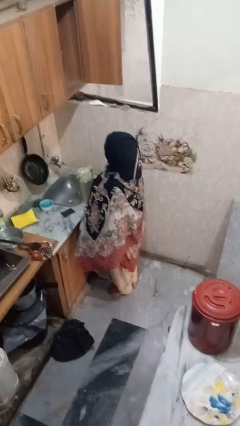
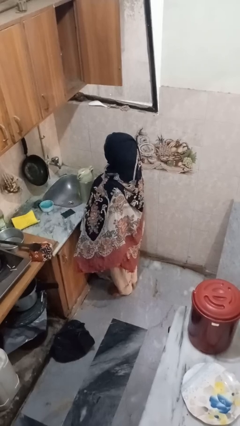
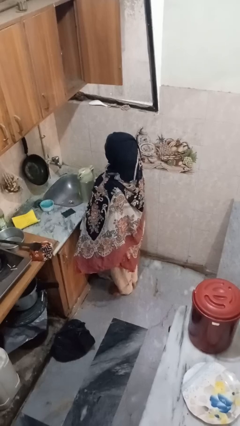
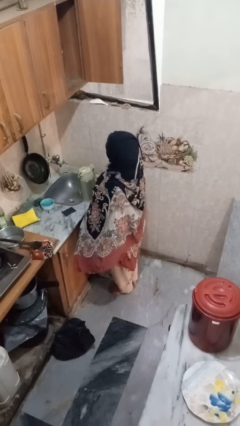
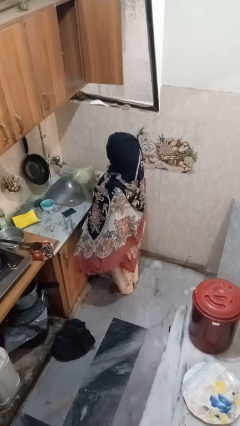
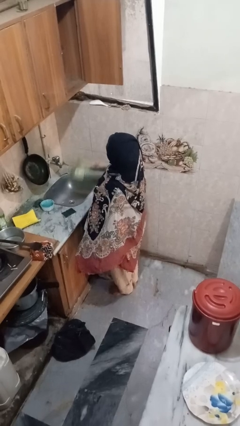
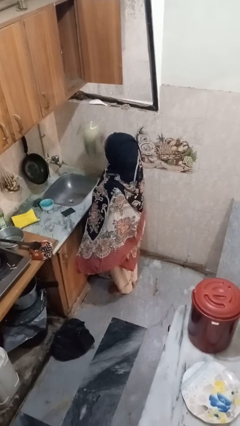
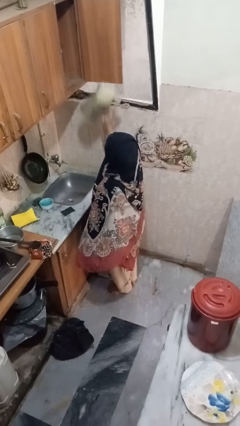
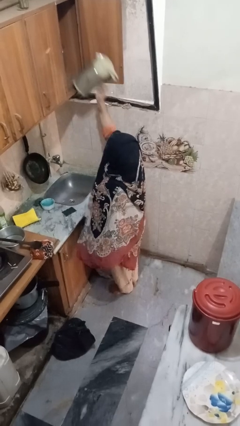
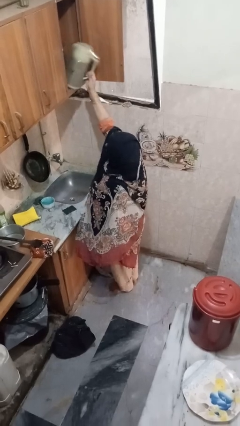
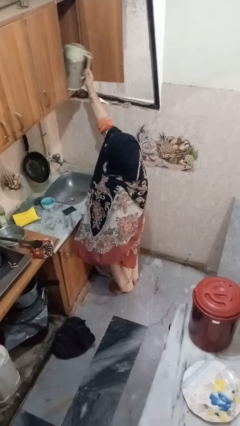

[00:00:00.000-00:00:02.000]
person takes object from cabinet

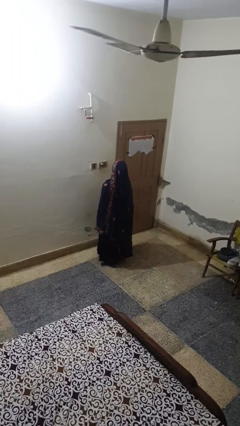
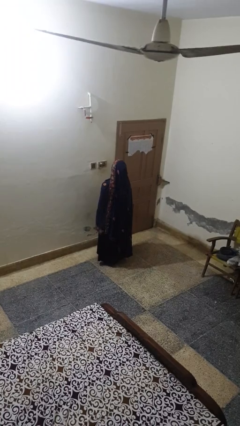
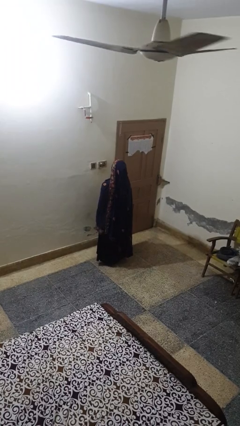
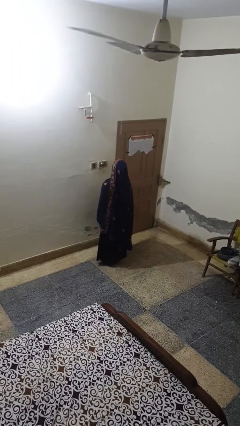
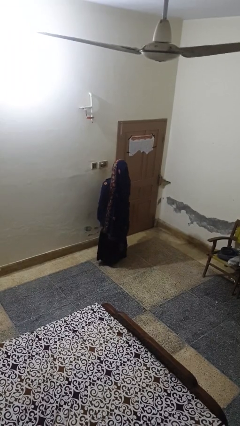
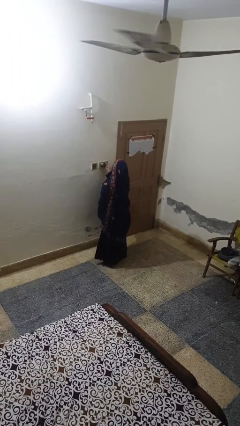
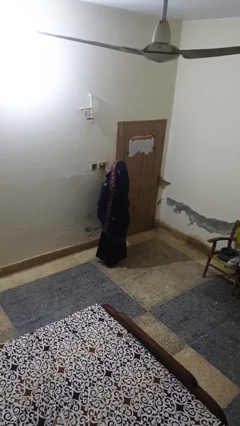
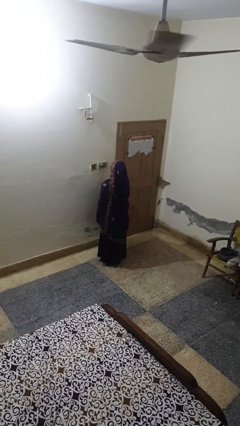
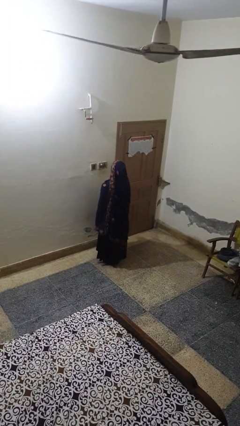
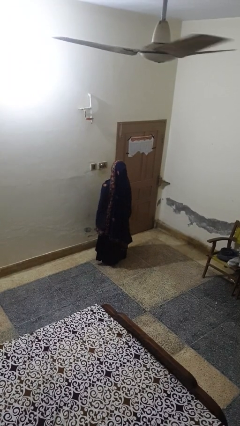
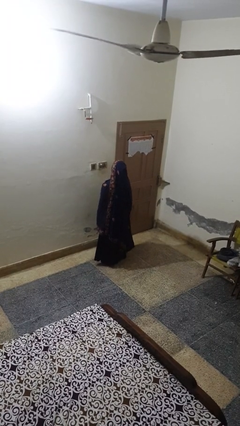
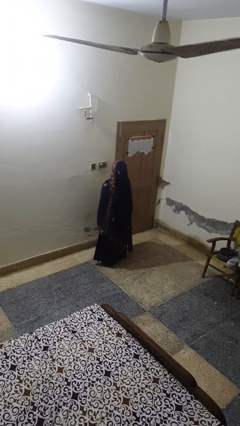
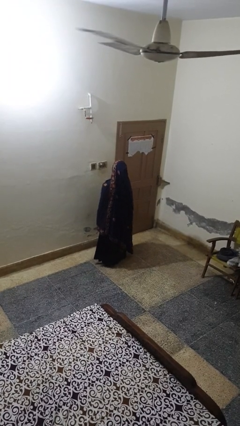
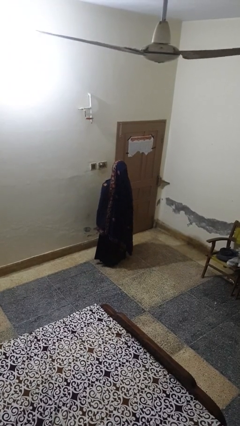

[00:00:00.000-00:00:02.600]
person turns off fan

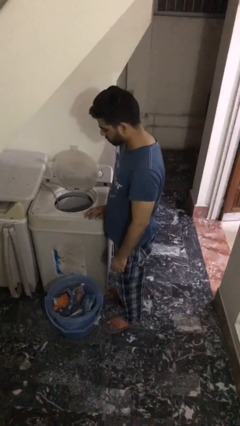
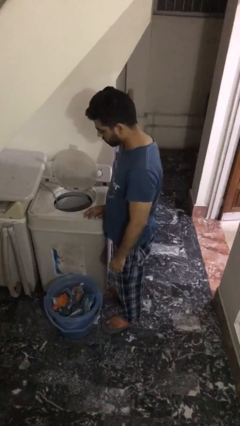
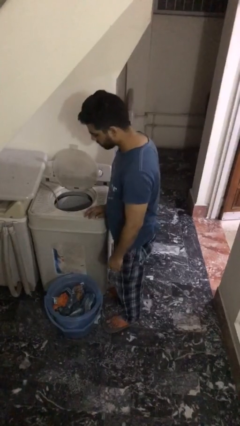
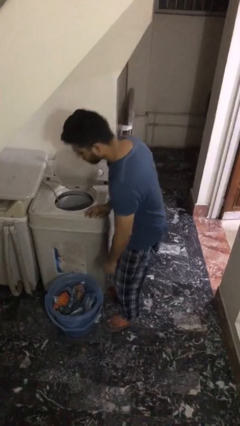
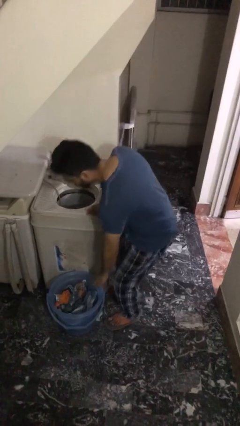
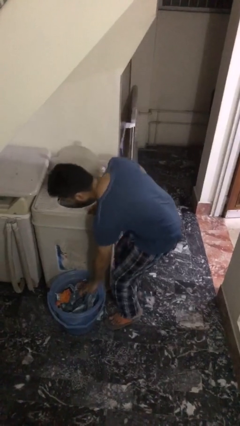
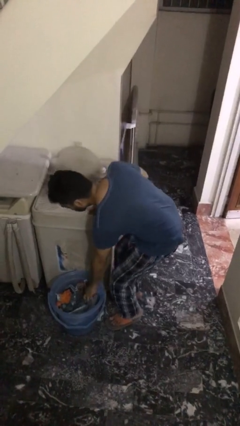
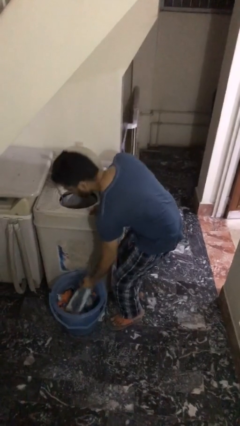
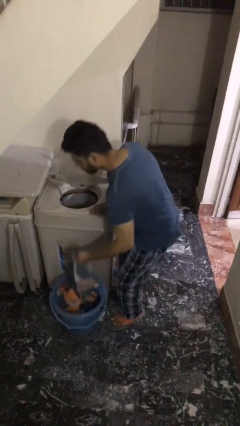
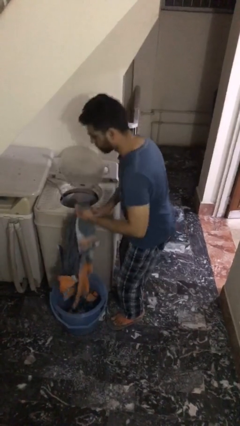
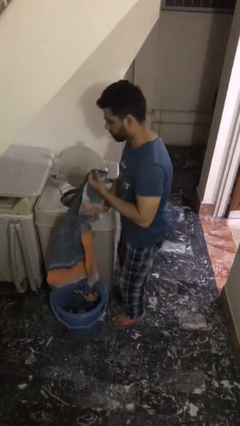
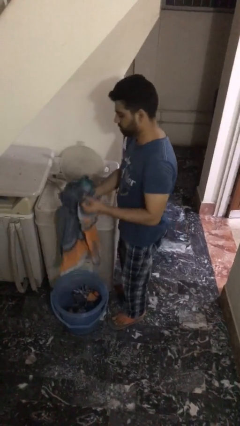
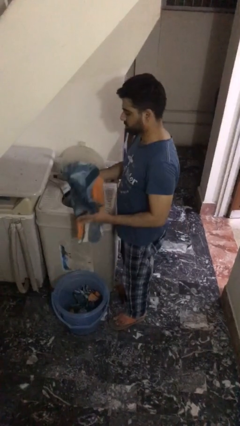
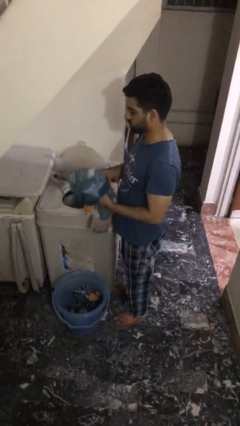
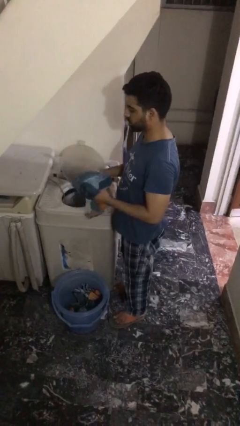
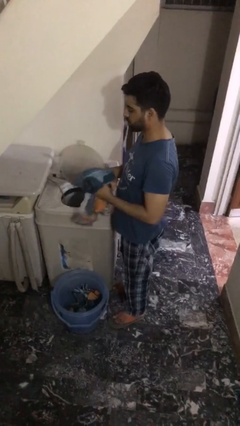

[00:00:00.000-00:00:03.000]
person unloads clotheswasher

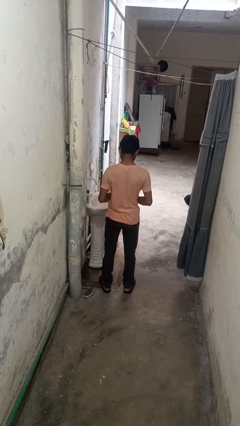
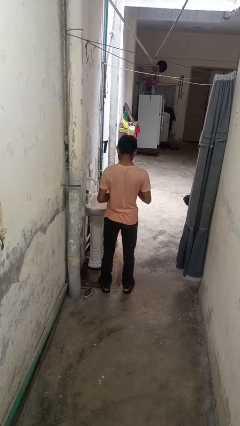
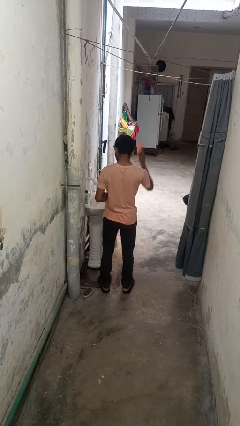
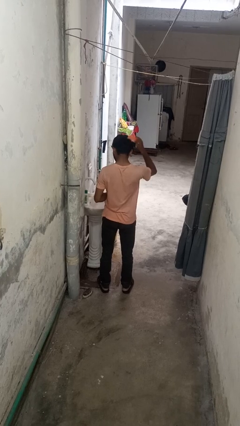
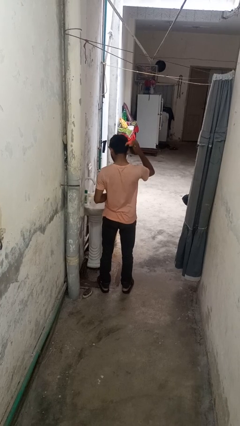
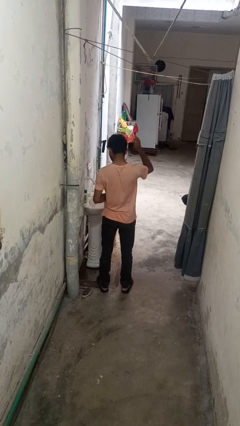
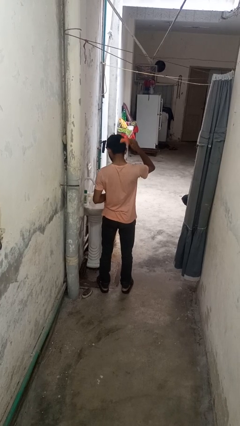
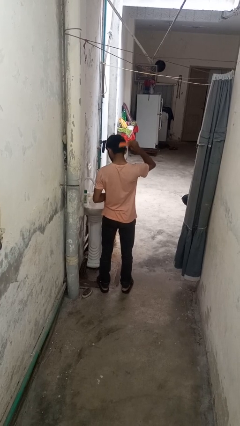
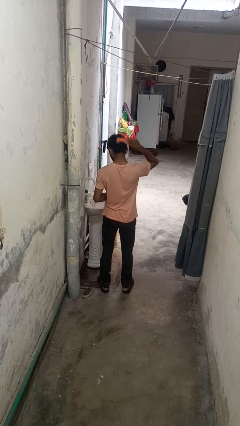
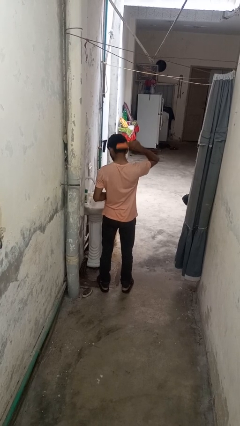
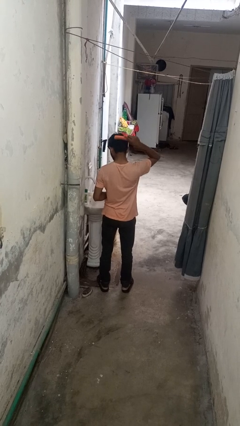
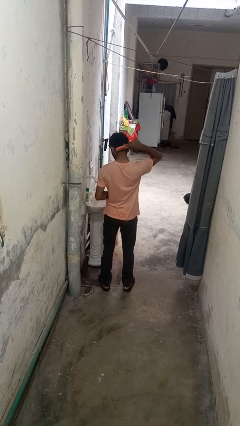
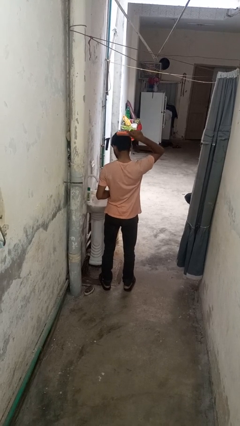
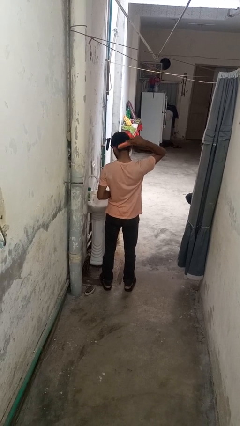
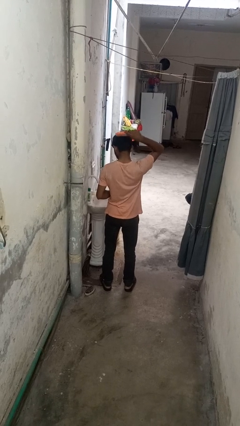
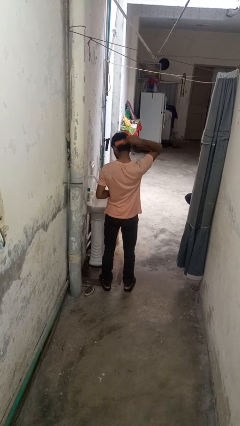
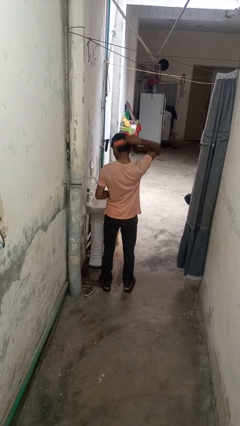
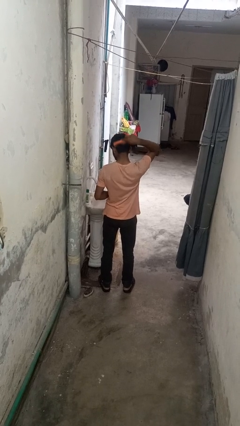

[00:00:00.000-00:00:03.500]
person brushes hair

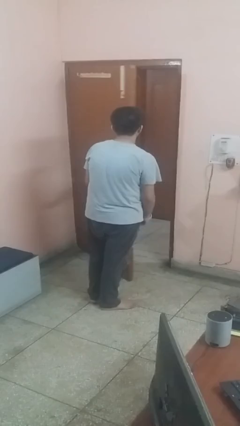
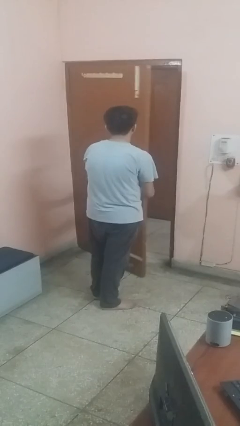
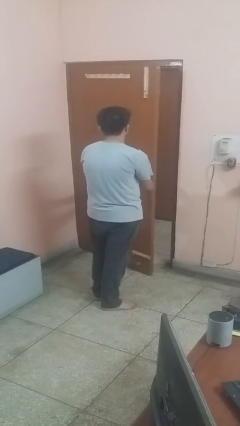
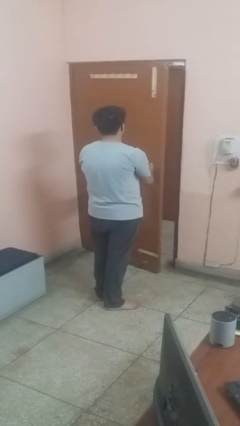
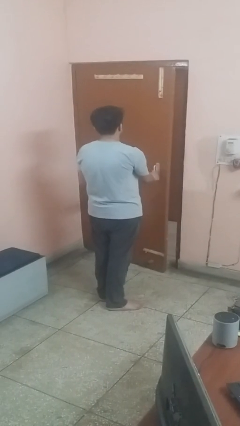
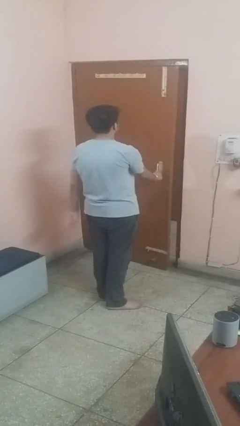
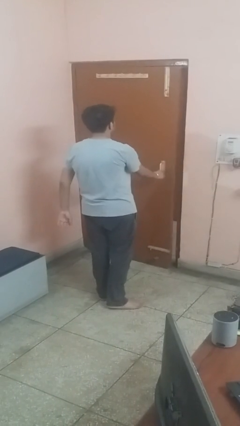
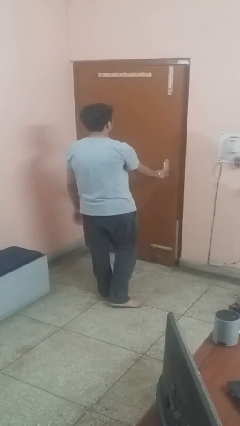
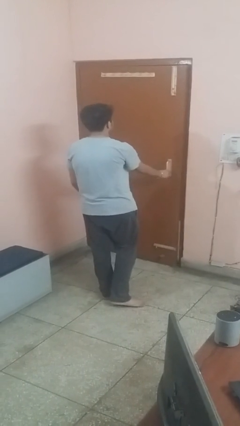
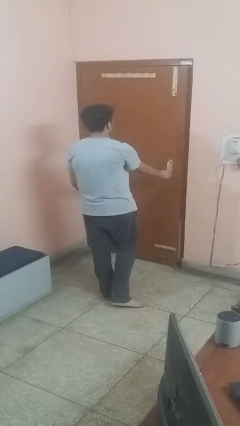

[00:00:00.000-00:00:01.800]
person closes facility door

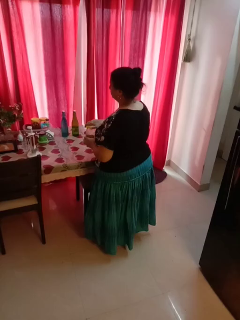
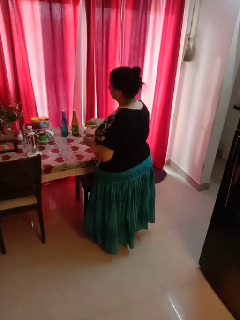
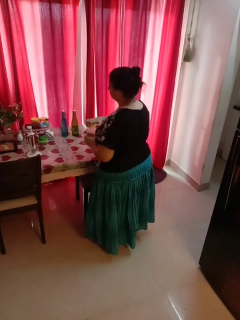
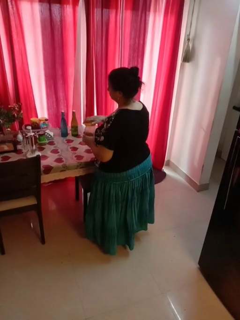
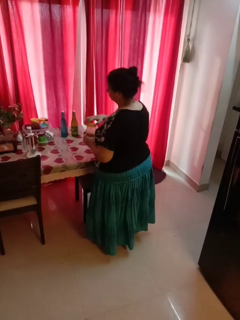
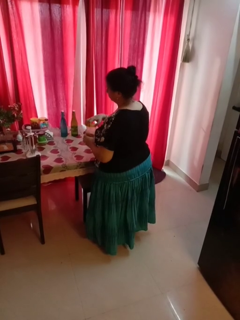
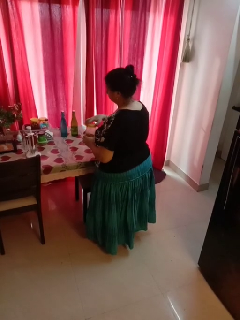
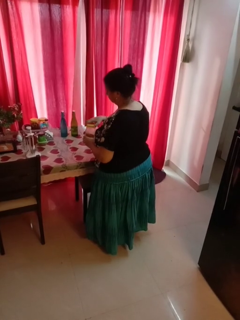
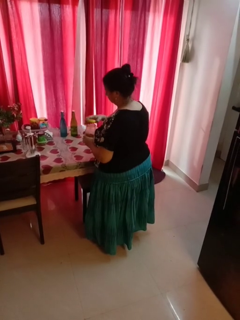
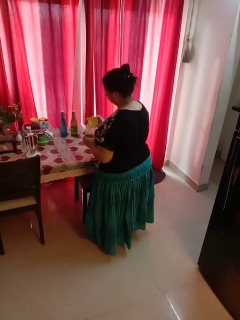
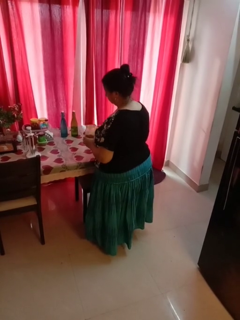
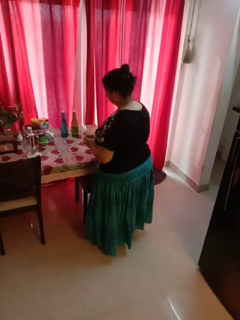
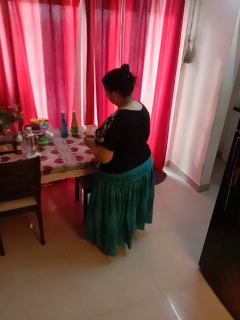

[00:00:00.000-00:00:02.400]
person opens jar

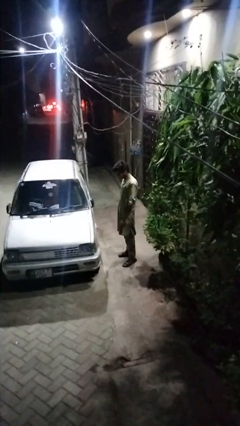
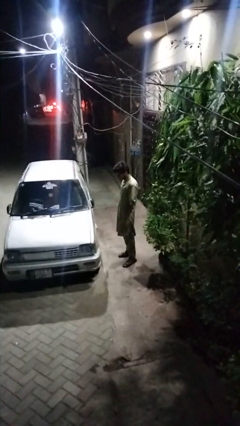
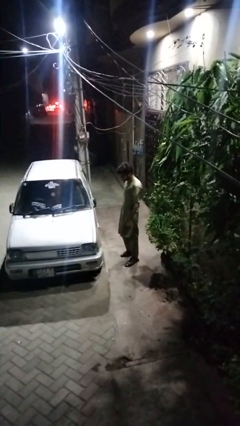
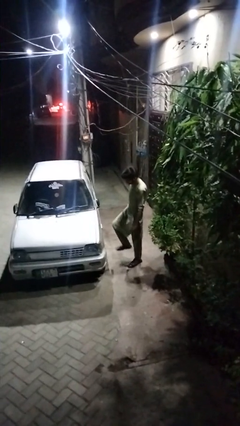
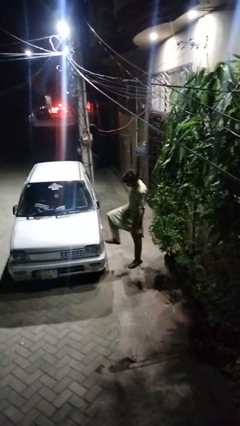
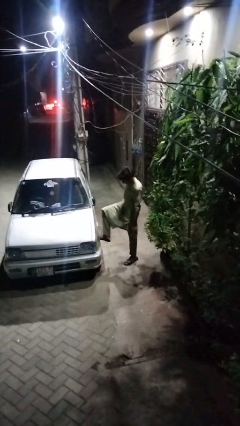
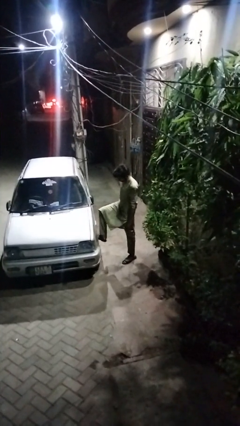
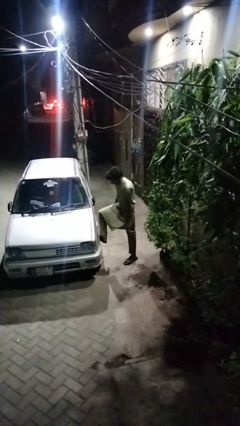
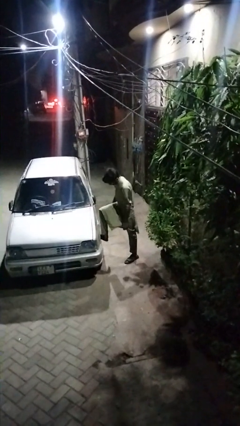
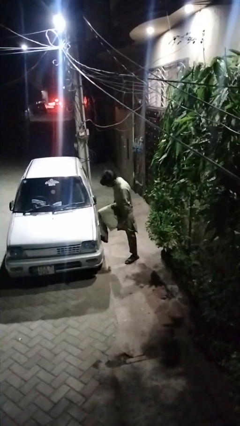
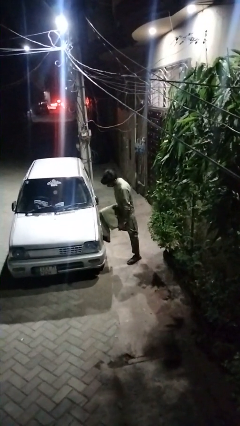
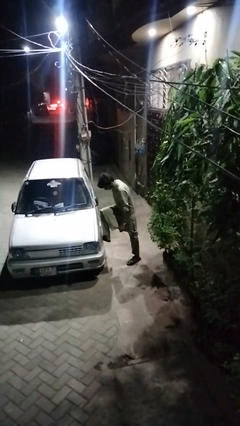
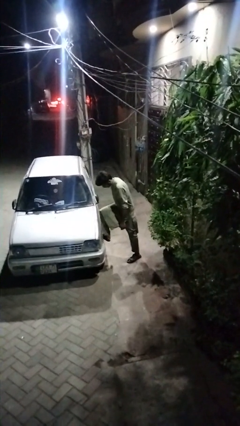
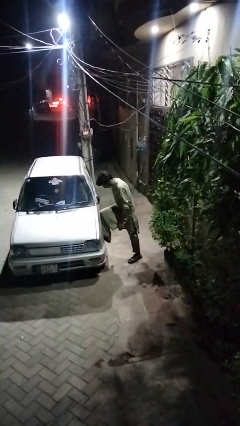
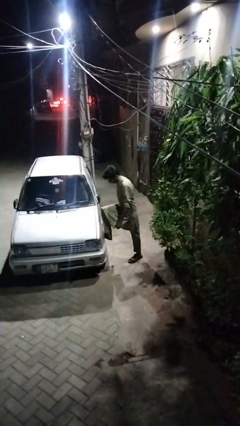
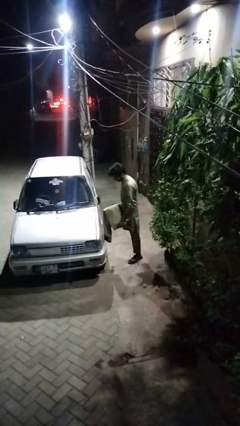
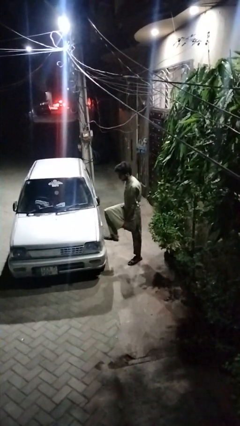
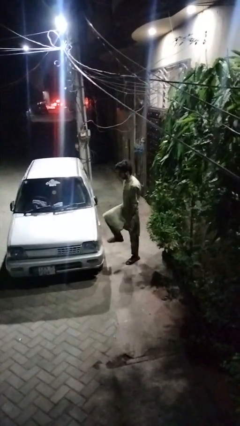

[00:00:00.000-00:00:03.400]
person kicks car tires
